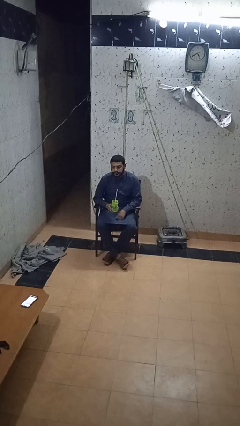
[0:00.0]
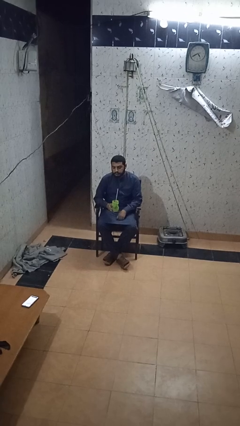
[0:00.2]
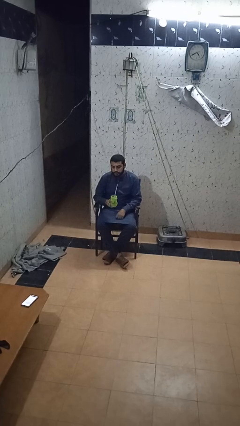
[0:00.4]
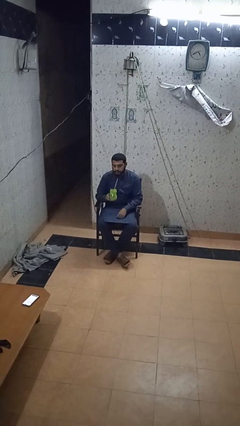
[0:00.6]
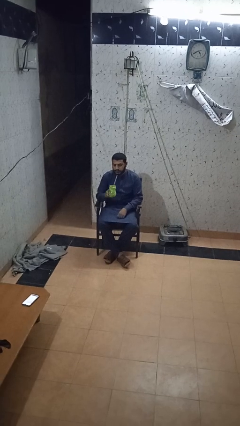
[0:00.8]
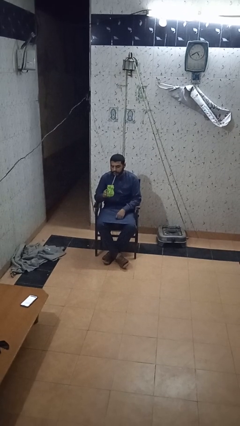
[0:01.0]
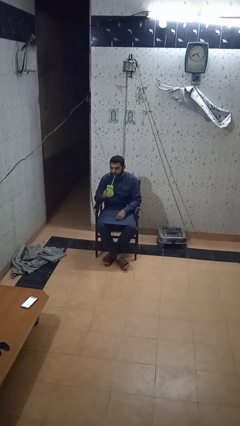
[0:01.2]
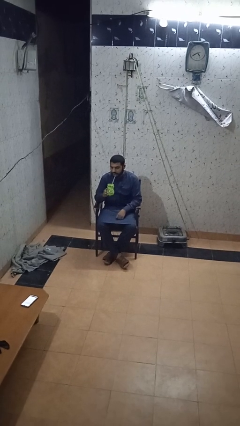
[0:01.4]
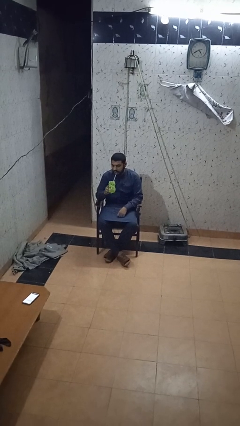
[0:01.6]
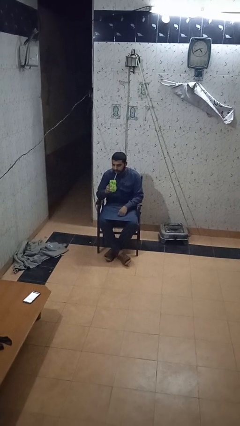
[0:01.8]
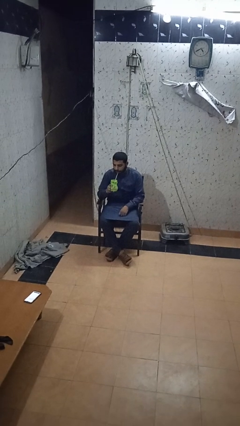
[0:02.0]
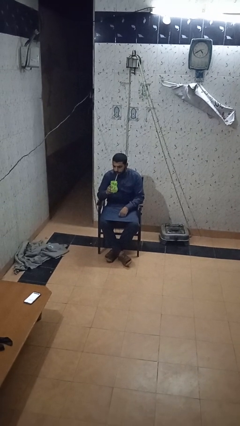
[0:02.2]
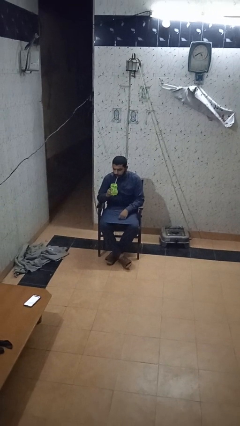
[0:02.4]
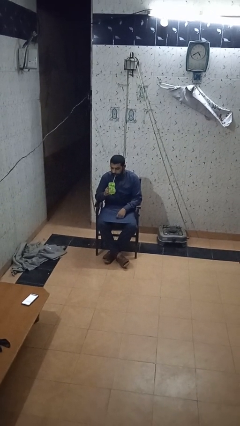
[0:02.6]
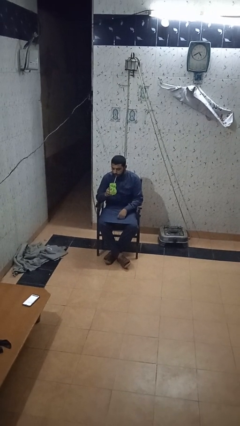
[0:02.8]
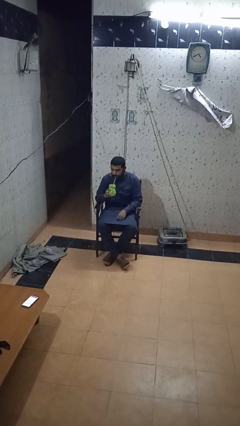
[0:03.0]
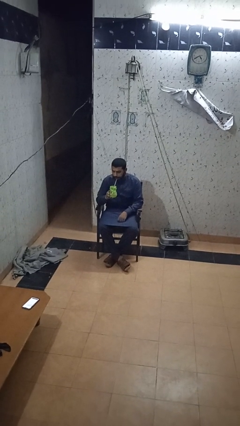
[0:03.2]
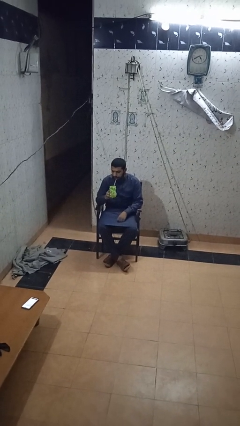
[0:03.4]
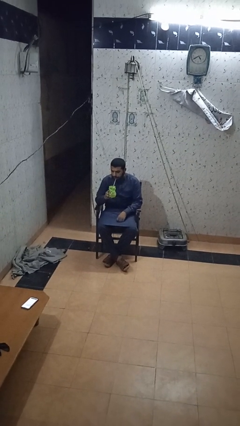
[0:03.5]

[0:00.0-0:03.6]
person drinks from straw

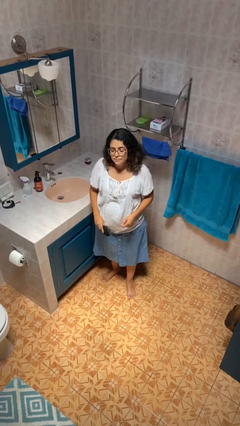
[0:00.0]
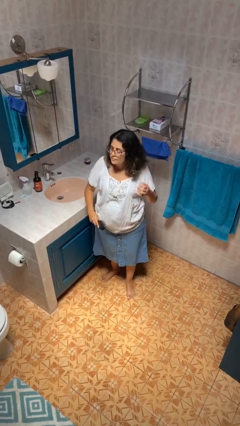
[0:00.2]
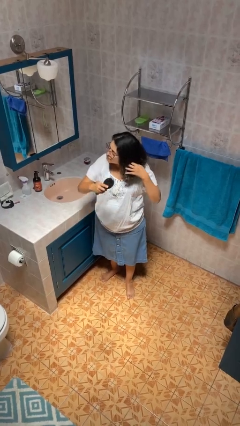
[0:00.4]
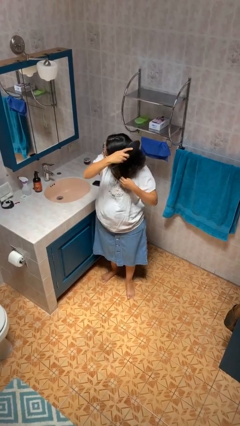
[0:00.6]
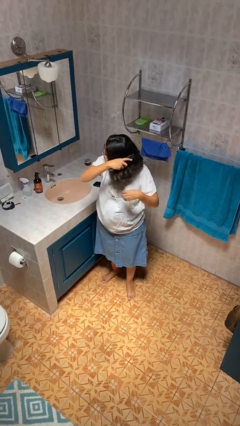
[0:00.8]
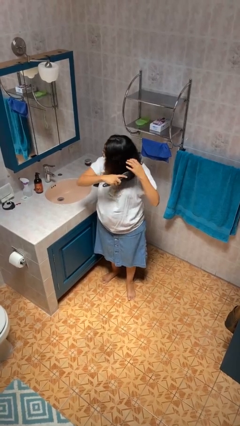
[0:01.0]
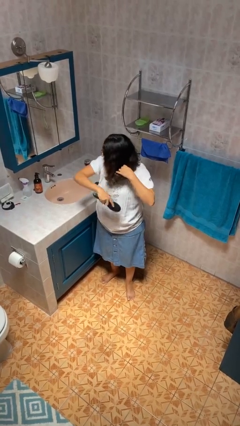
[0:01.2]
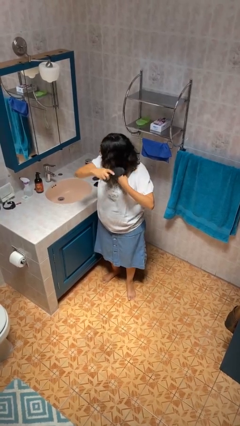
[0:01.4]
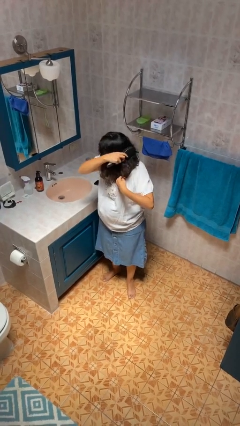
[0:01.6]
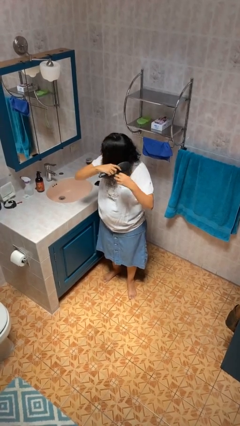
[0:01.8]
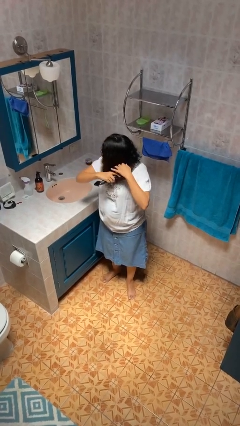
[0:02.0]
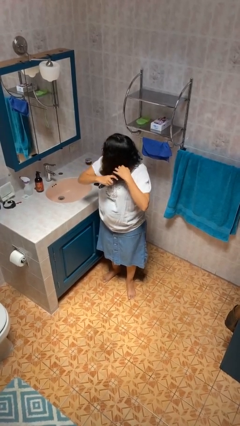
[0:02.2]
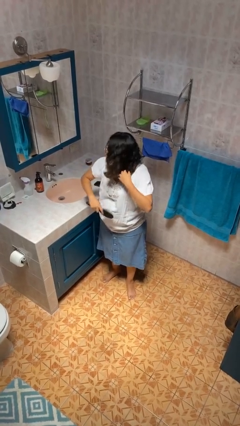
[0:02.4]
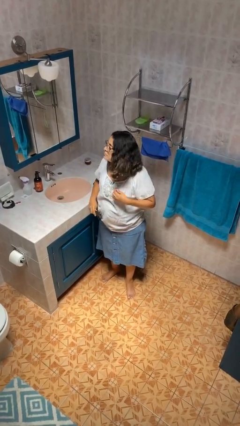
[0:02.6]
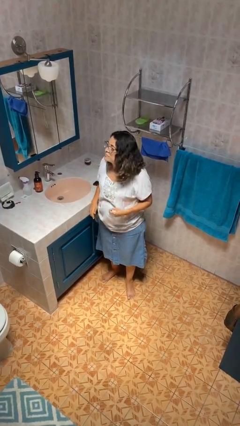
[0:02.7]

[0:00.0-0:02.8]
person brushes hair

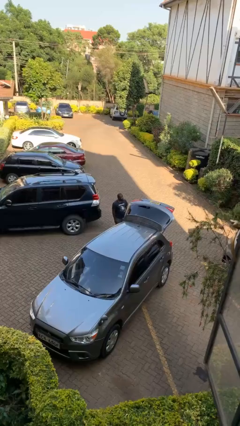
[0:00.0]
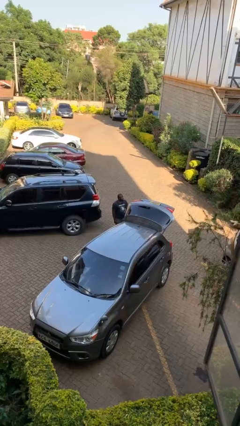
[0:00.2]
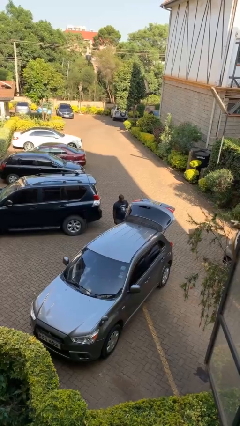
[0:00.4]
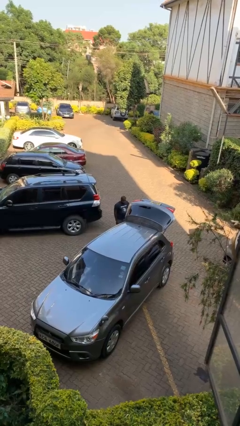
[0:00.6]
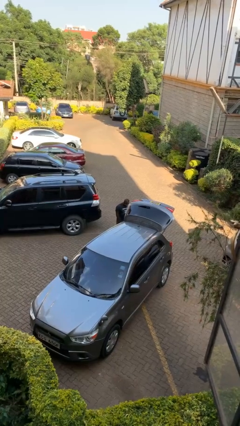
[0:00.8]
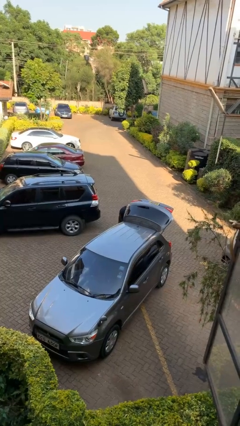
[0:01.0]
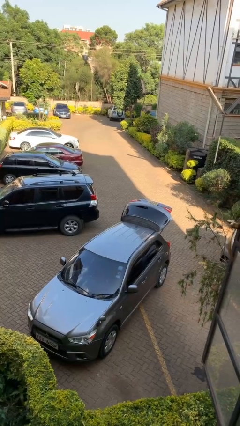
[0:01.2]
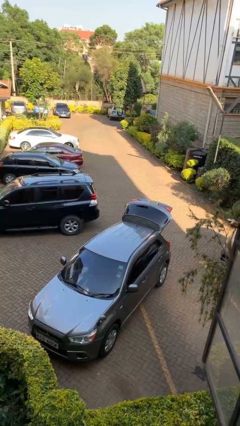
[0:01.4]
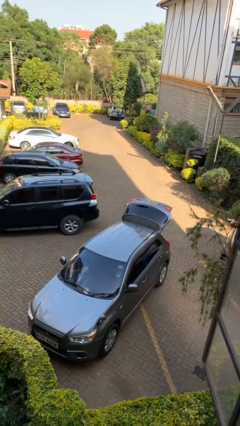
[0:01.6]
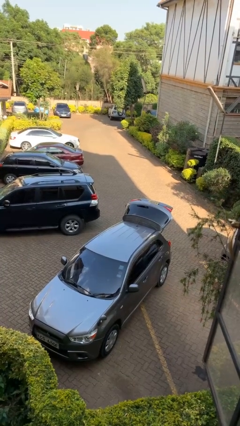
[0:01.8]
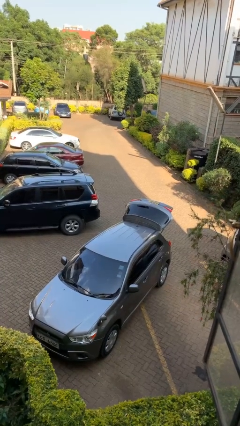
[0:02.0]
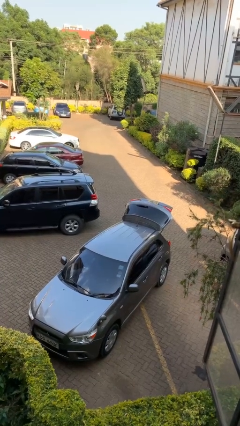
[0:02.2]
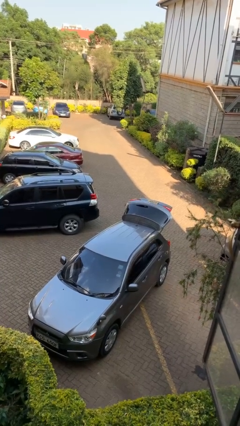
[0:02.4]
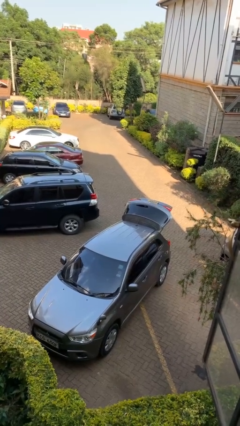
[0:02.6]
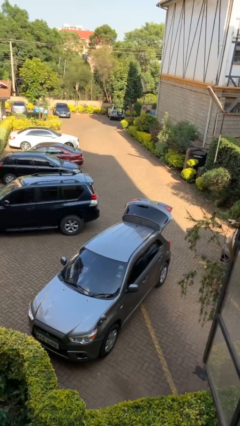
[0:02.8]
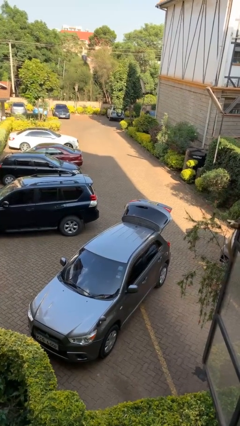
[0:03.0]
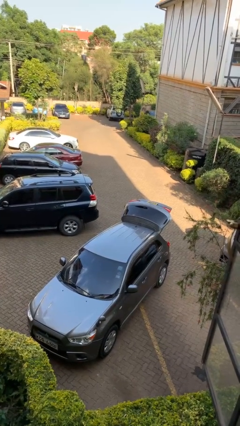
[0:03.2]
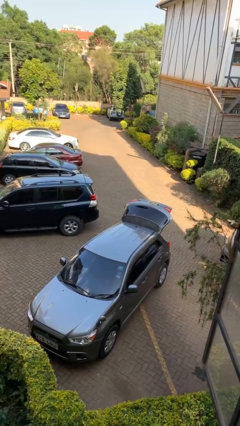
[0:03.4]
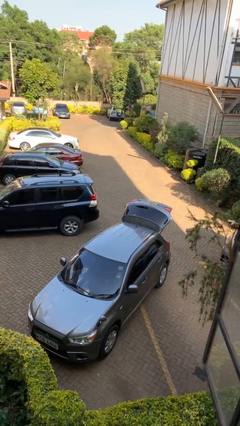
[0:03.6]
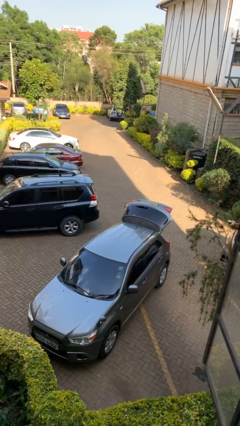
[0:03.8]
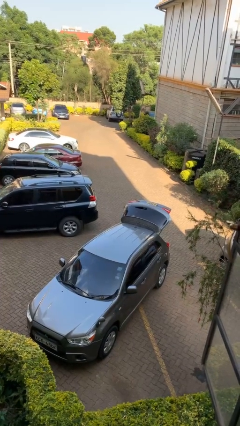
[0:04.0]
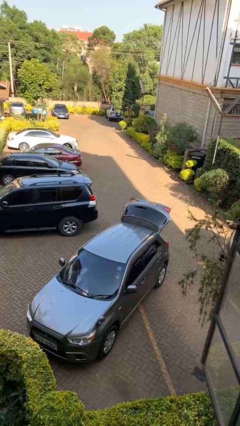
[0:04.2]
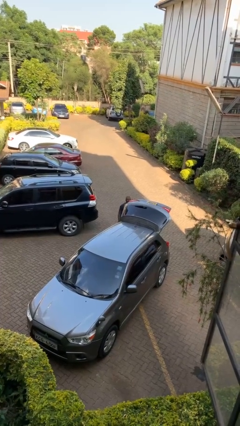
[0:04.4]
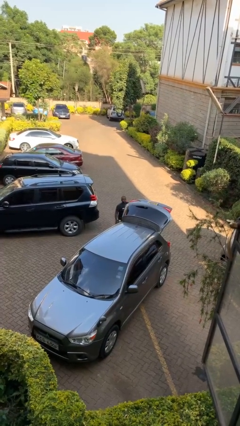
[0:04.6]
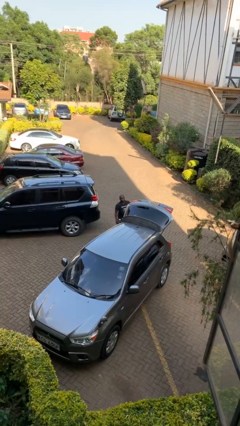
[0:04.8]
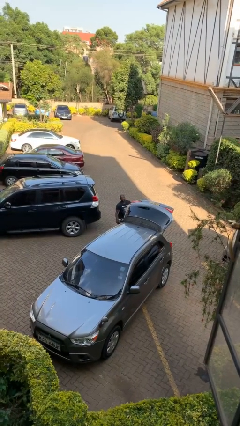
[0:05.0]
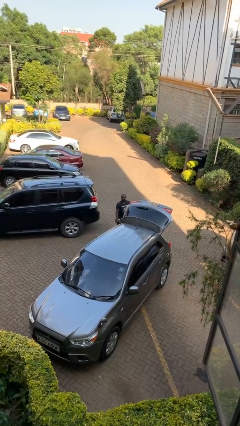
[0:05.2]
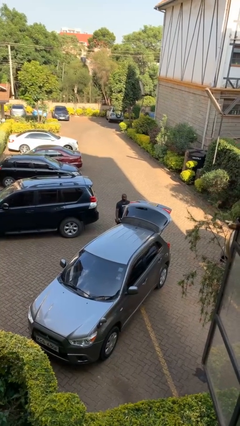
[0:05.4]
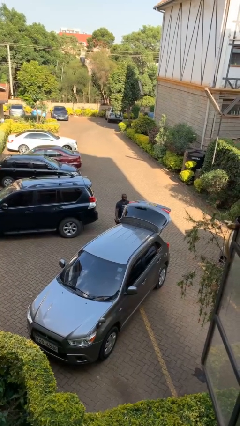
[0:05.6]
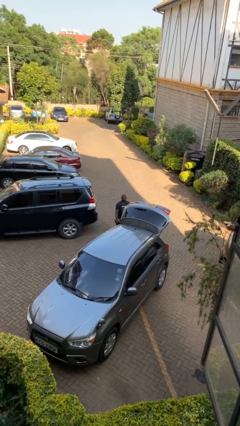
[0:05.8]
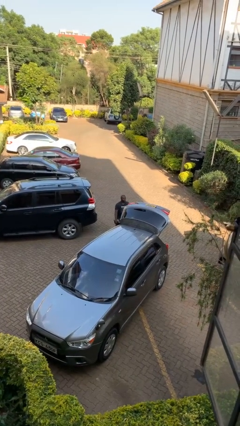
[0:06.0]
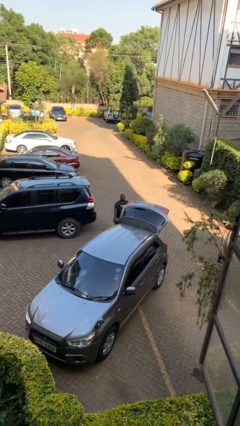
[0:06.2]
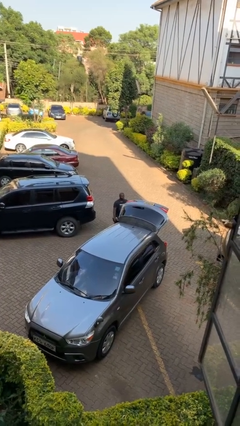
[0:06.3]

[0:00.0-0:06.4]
person unloads car

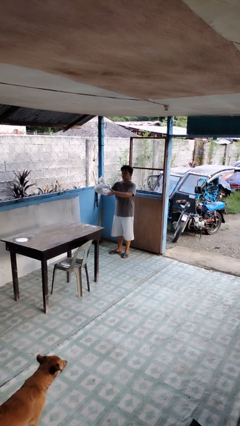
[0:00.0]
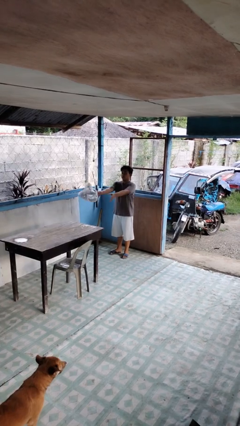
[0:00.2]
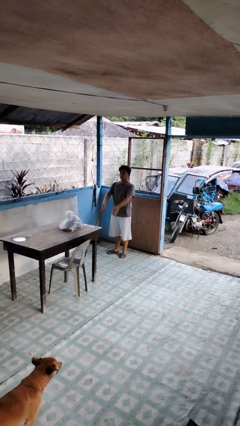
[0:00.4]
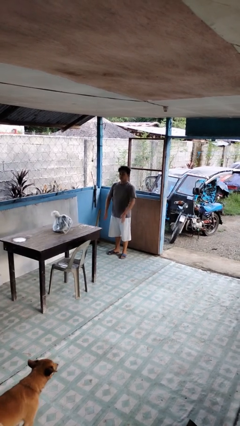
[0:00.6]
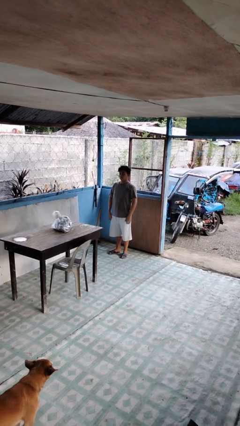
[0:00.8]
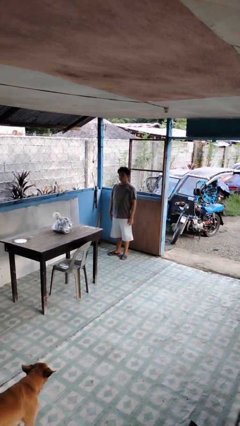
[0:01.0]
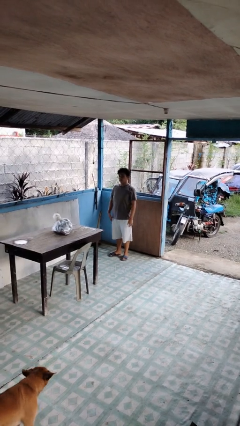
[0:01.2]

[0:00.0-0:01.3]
person throws object on table

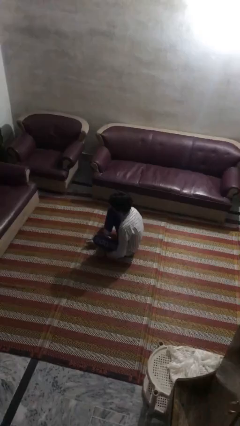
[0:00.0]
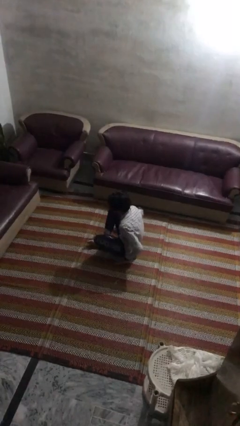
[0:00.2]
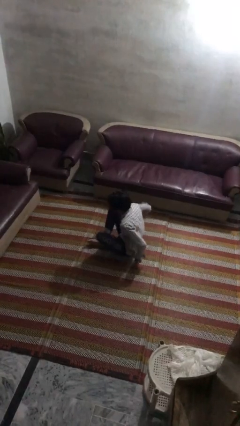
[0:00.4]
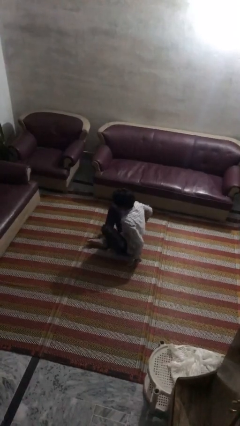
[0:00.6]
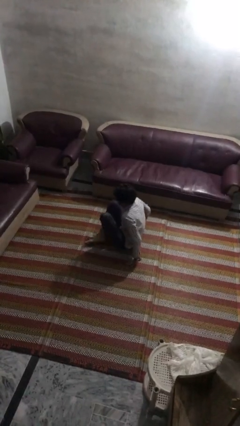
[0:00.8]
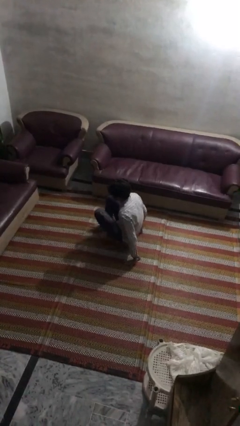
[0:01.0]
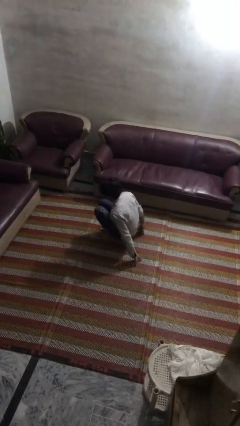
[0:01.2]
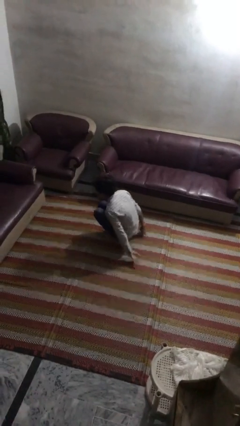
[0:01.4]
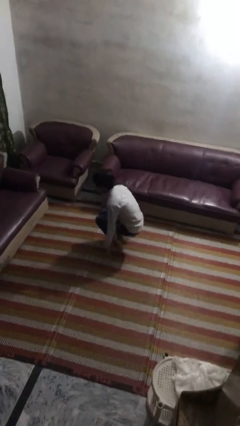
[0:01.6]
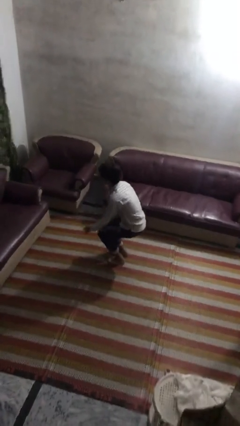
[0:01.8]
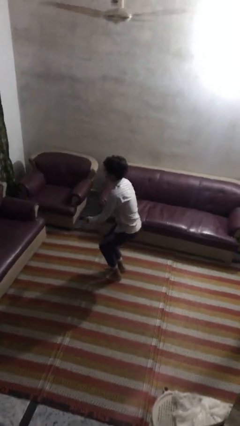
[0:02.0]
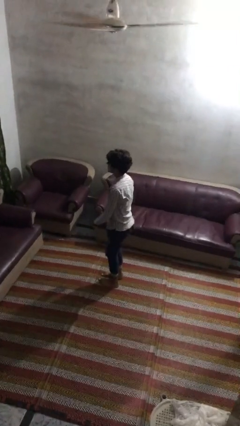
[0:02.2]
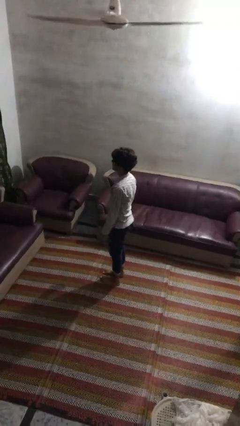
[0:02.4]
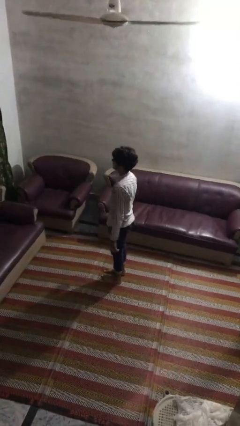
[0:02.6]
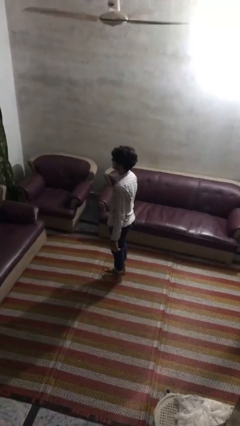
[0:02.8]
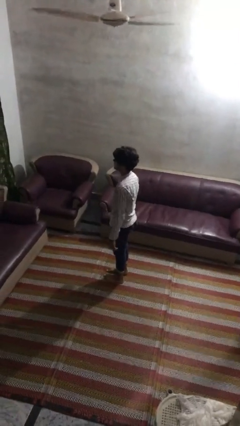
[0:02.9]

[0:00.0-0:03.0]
person stands up from floor

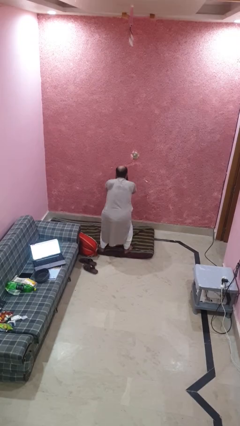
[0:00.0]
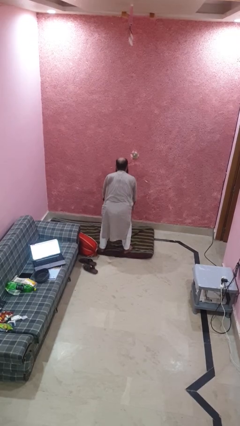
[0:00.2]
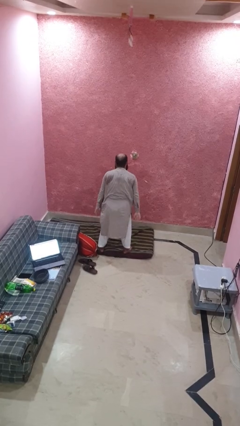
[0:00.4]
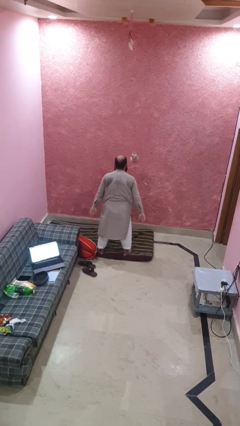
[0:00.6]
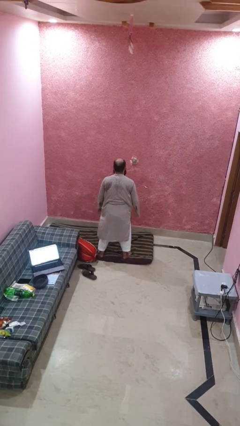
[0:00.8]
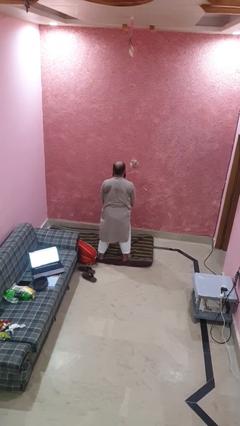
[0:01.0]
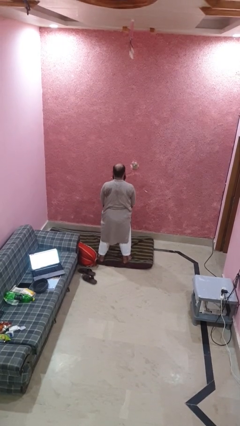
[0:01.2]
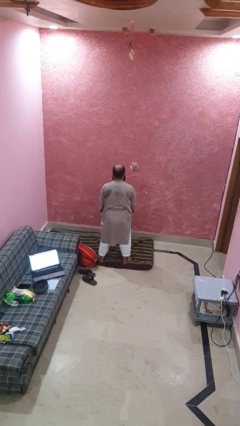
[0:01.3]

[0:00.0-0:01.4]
person stands up
